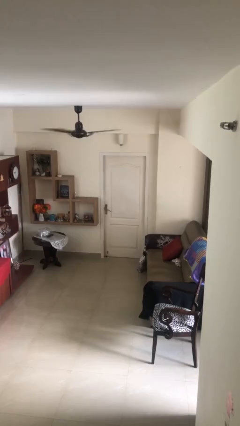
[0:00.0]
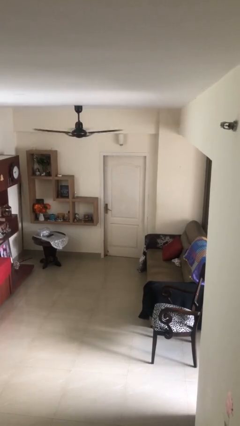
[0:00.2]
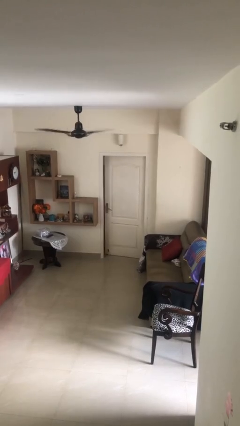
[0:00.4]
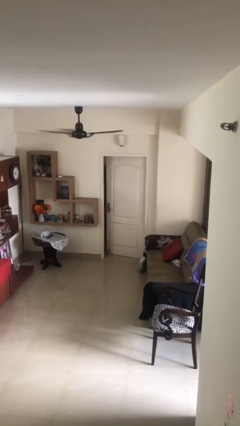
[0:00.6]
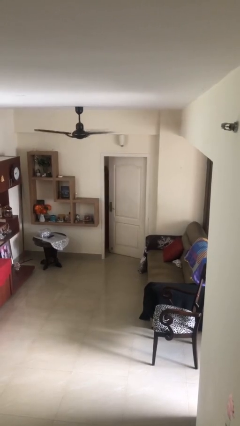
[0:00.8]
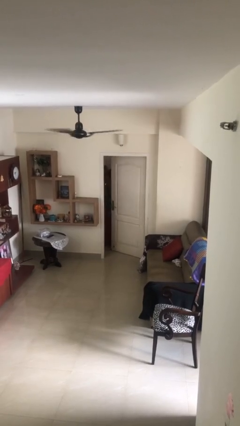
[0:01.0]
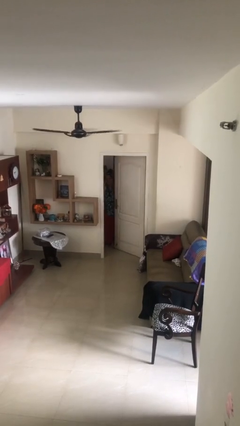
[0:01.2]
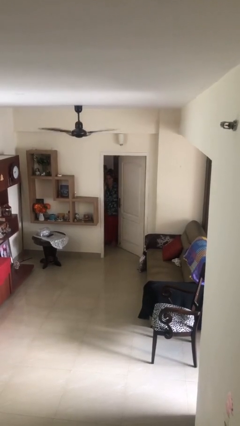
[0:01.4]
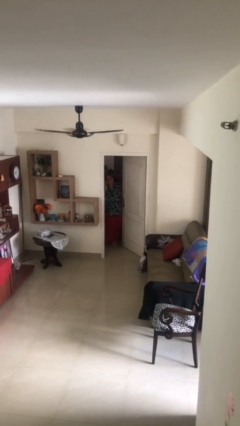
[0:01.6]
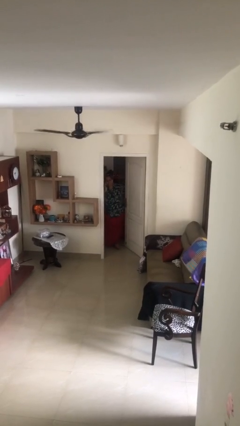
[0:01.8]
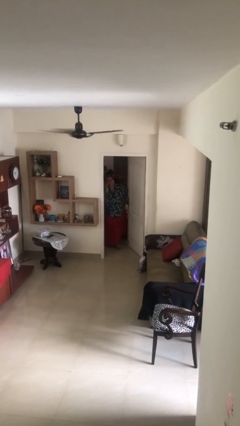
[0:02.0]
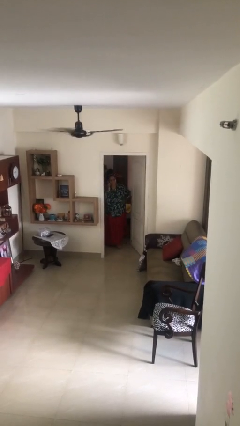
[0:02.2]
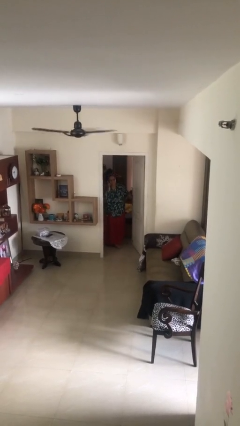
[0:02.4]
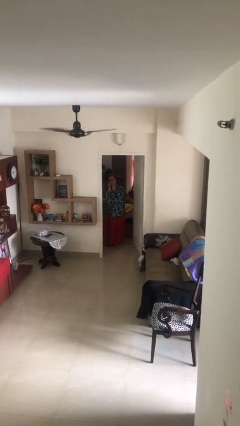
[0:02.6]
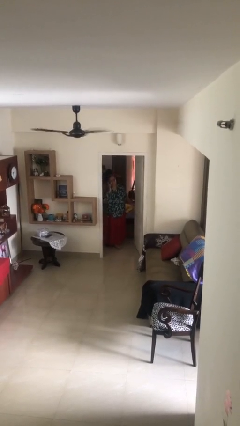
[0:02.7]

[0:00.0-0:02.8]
person opens facility door

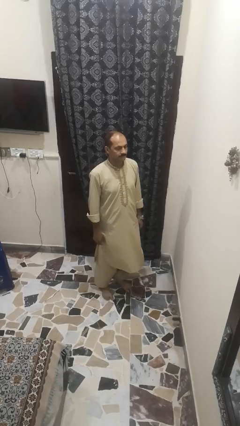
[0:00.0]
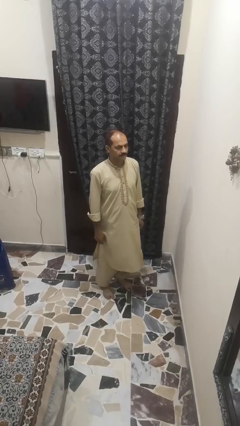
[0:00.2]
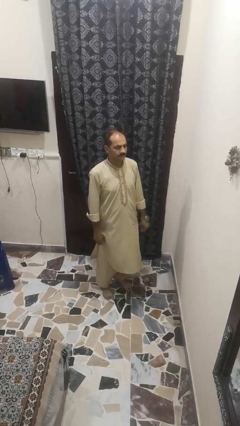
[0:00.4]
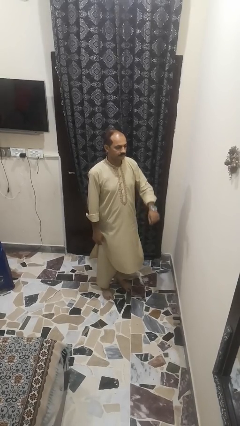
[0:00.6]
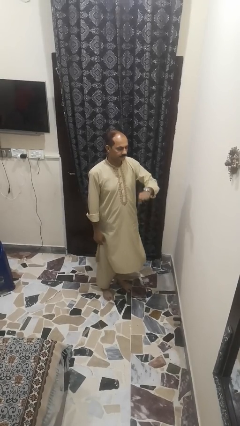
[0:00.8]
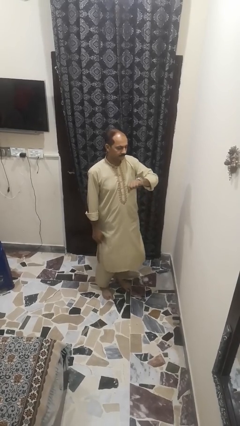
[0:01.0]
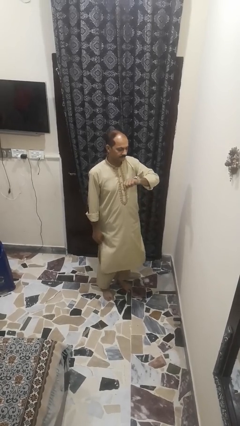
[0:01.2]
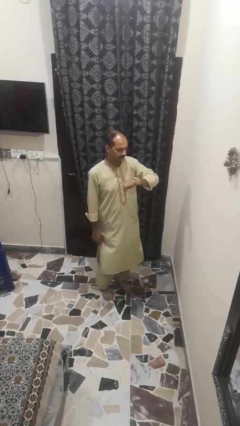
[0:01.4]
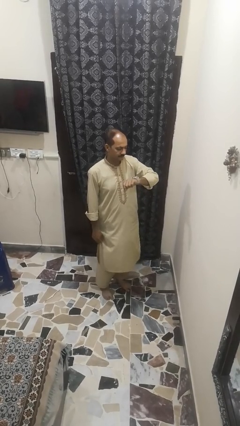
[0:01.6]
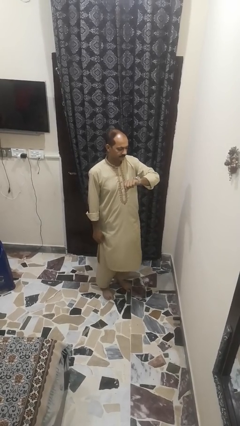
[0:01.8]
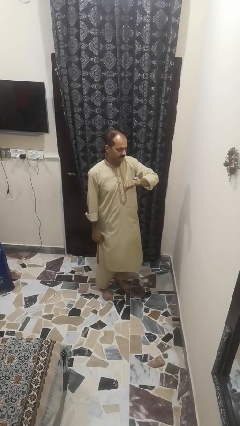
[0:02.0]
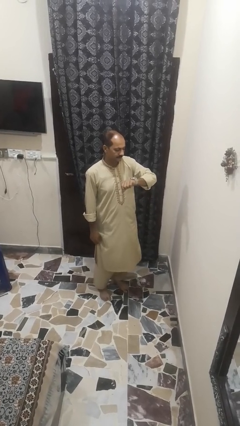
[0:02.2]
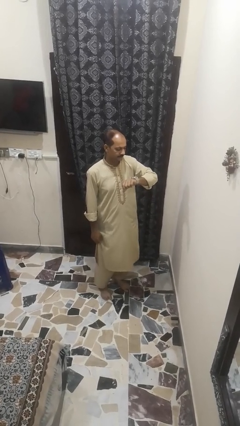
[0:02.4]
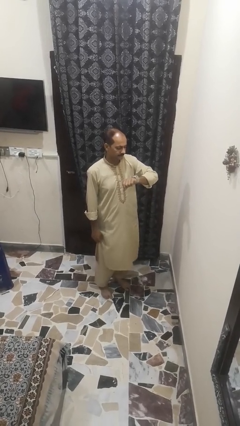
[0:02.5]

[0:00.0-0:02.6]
person looks at wristwatch

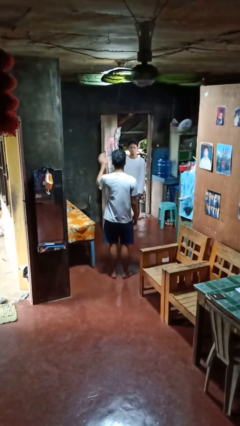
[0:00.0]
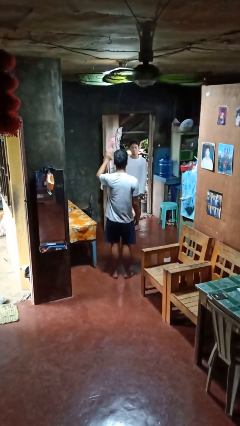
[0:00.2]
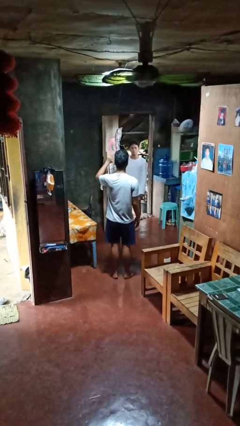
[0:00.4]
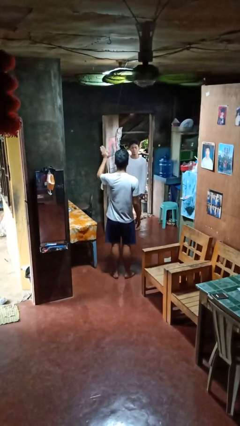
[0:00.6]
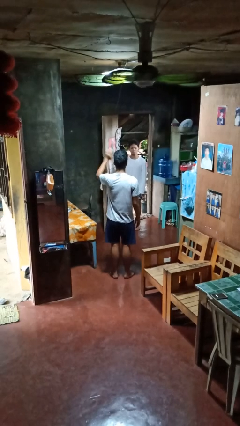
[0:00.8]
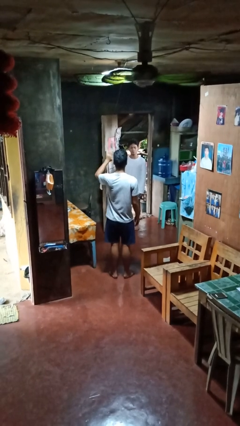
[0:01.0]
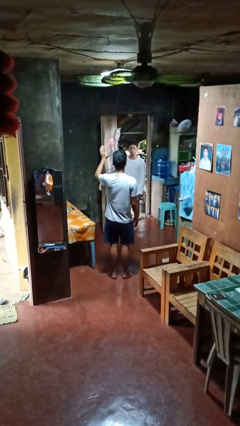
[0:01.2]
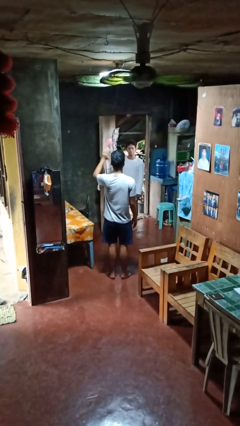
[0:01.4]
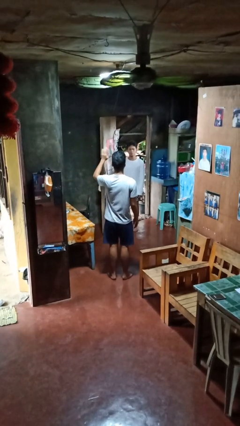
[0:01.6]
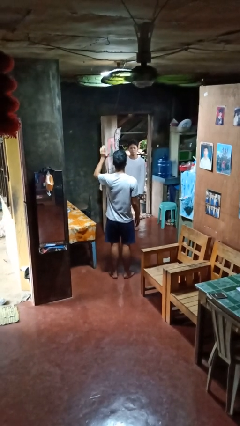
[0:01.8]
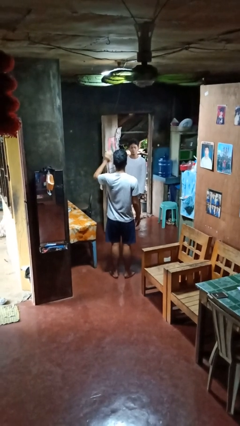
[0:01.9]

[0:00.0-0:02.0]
person waves at person

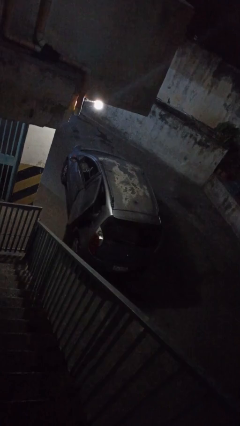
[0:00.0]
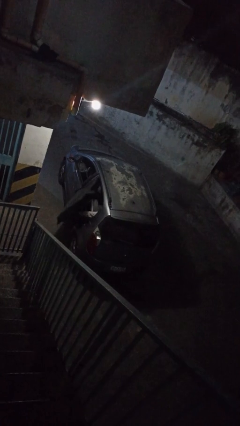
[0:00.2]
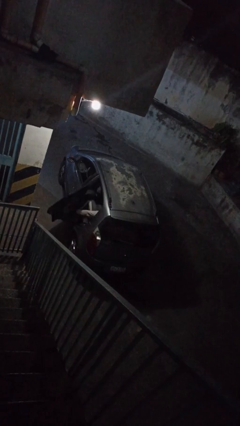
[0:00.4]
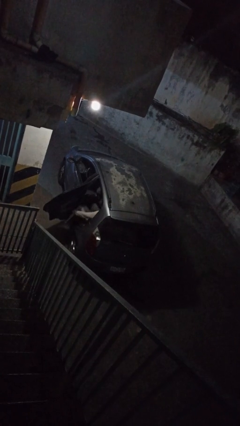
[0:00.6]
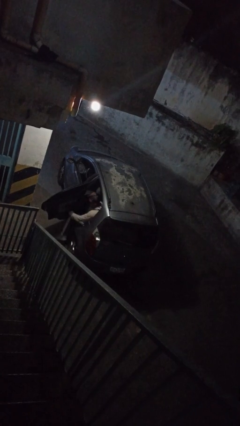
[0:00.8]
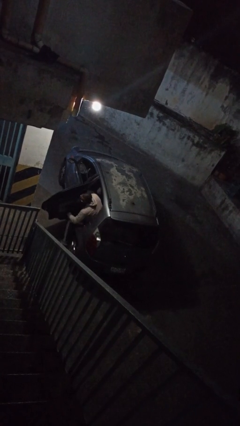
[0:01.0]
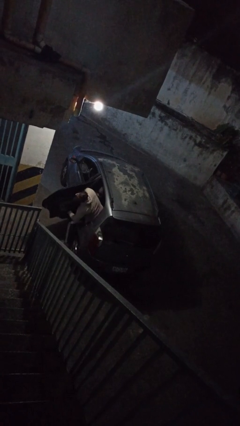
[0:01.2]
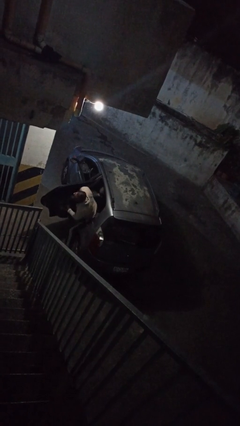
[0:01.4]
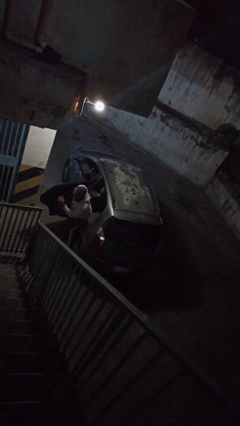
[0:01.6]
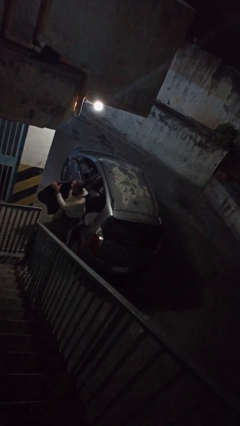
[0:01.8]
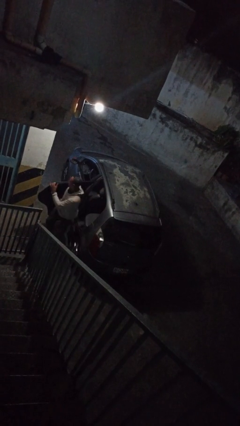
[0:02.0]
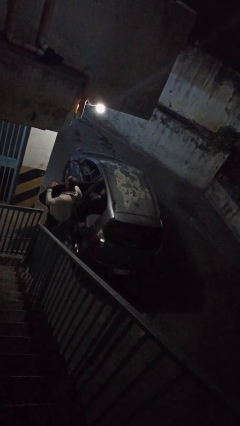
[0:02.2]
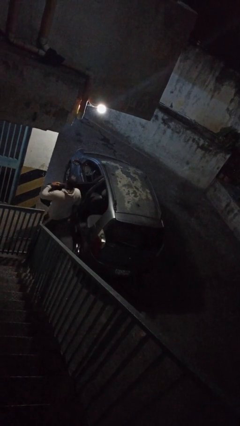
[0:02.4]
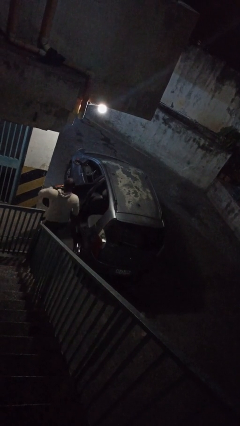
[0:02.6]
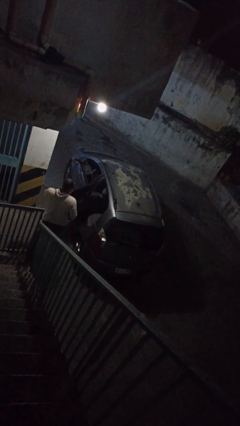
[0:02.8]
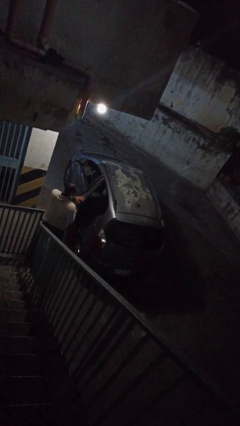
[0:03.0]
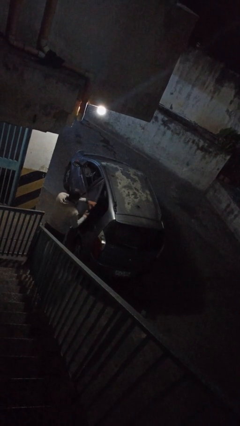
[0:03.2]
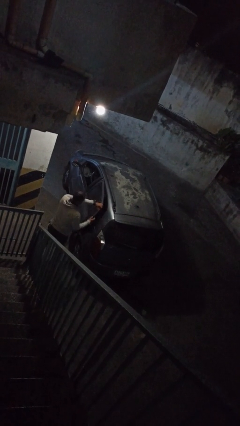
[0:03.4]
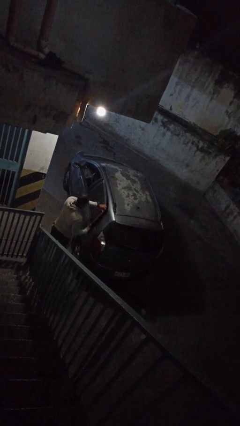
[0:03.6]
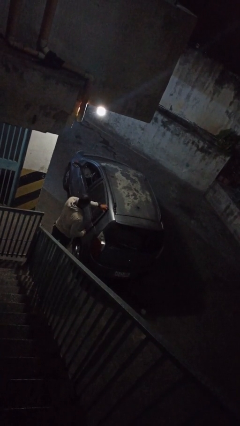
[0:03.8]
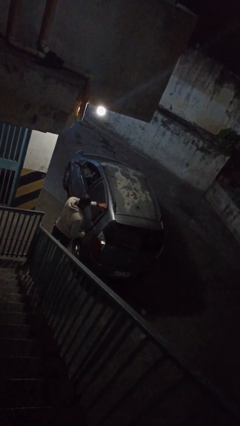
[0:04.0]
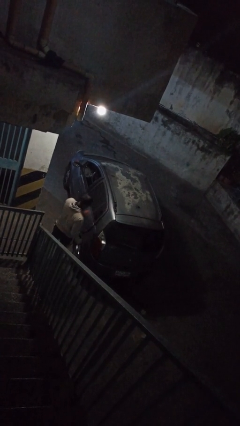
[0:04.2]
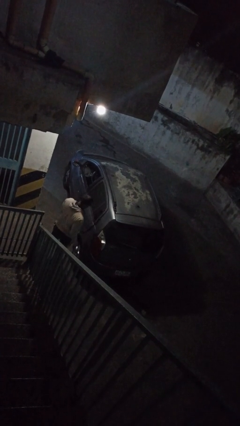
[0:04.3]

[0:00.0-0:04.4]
car drops off person

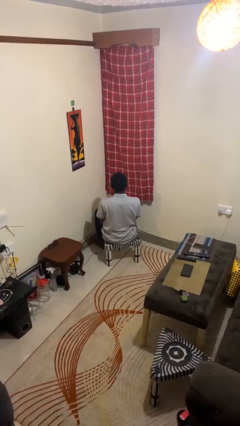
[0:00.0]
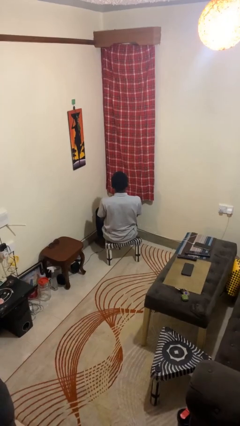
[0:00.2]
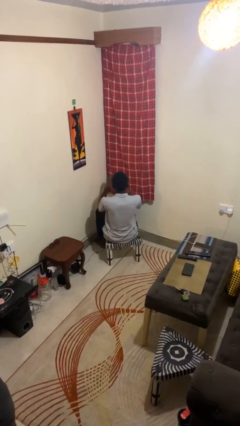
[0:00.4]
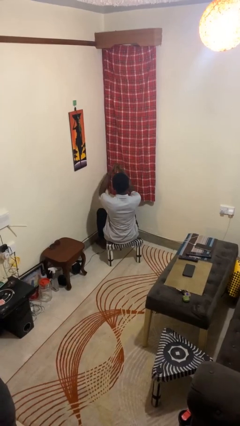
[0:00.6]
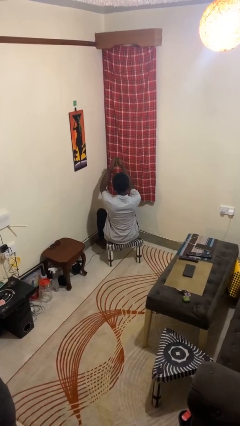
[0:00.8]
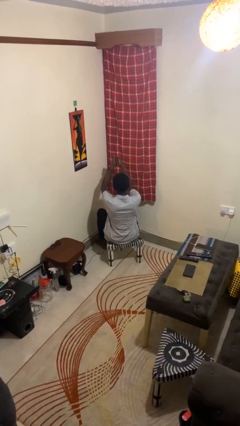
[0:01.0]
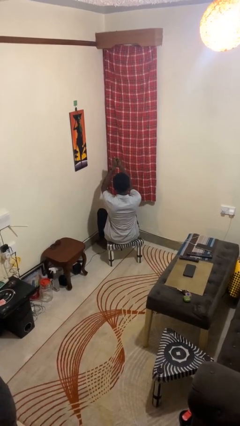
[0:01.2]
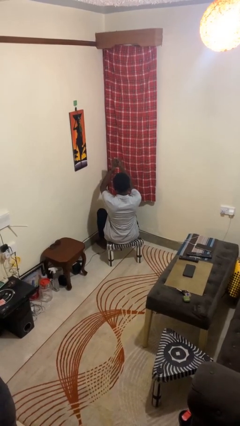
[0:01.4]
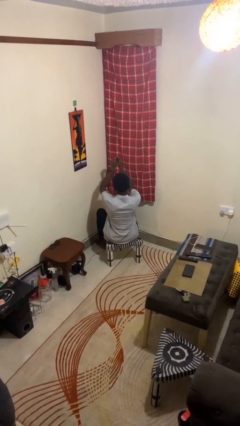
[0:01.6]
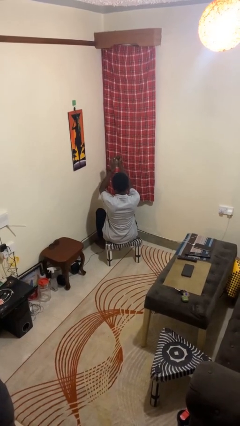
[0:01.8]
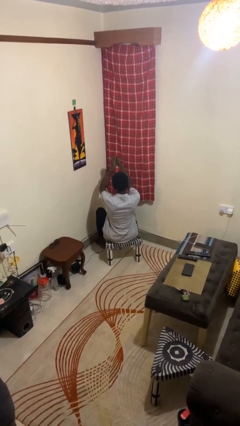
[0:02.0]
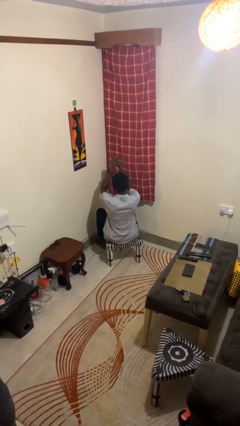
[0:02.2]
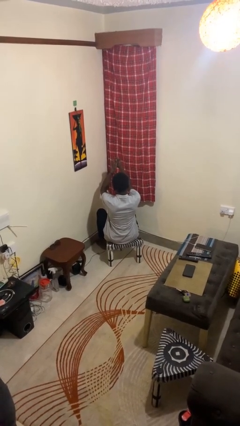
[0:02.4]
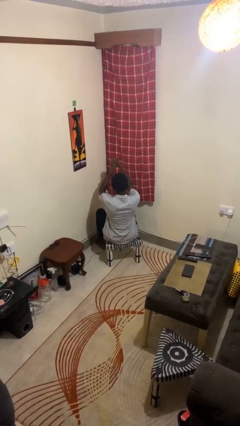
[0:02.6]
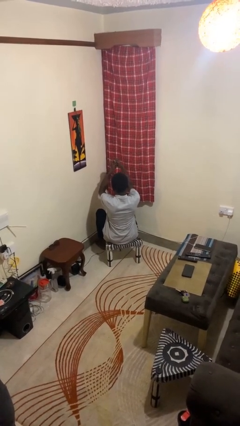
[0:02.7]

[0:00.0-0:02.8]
person cracks knuckles

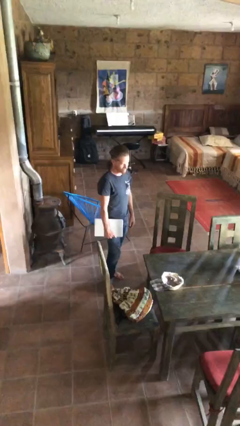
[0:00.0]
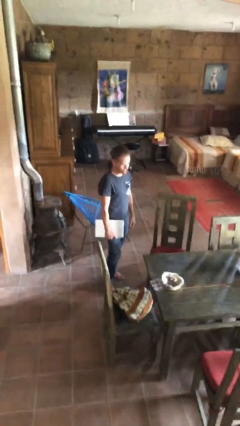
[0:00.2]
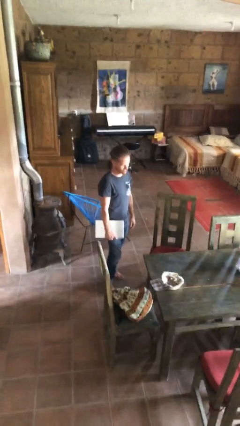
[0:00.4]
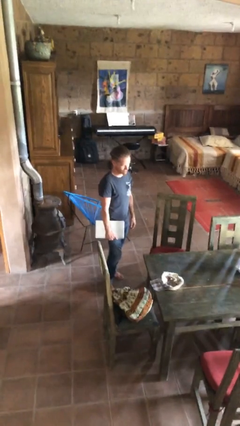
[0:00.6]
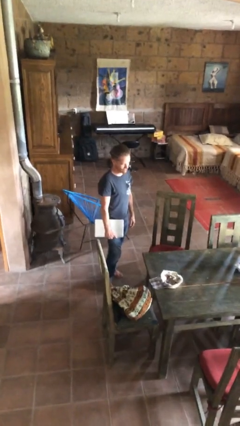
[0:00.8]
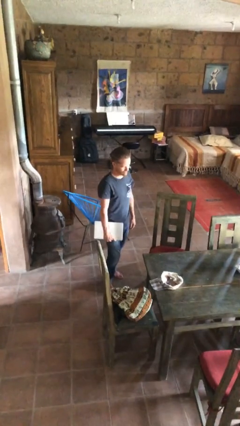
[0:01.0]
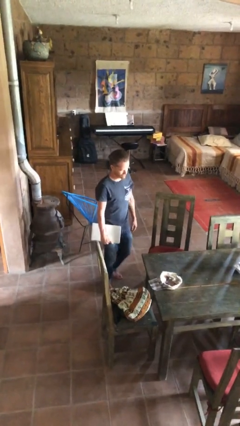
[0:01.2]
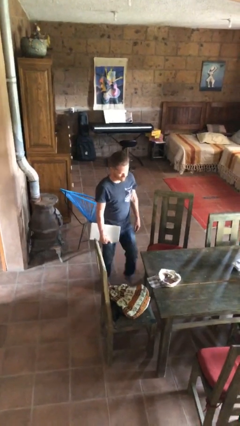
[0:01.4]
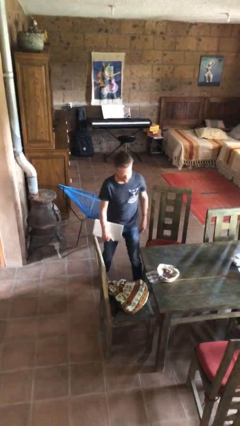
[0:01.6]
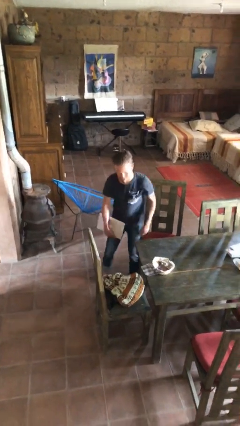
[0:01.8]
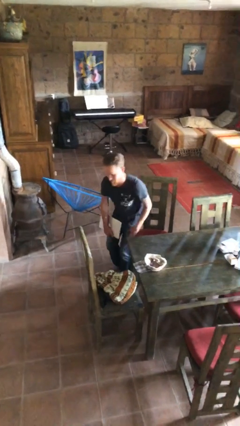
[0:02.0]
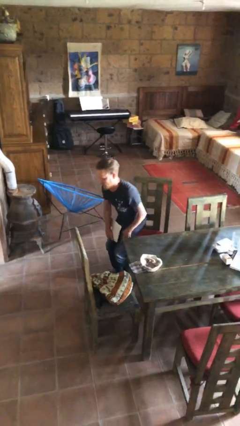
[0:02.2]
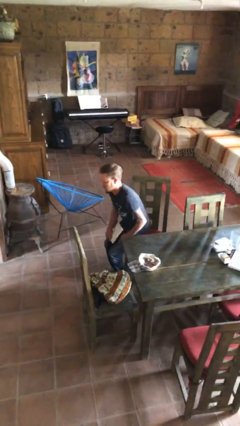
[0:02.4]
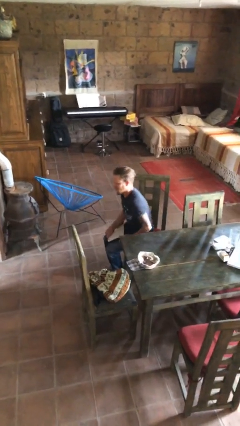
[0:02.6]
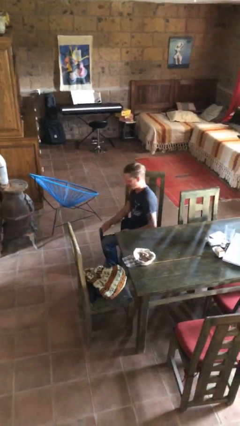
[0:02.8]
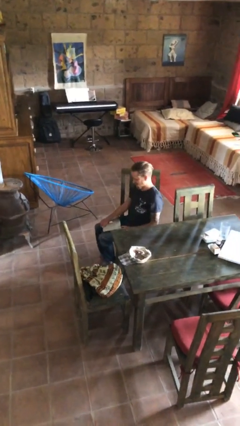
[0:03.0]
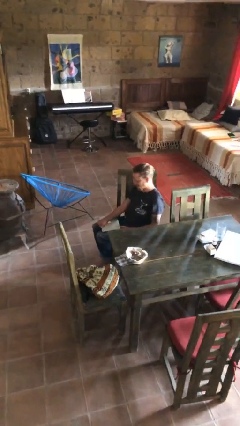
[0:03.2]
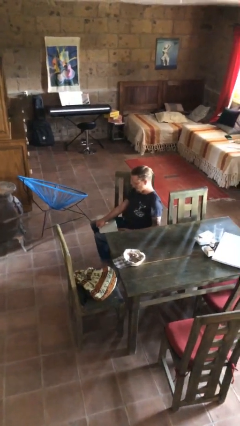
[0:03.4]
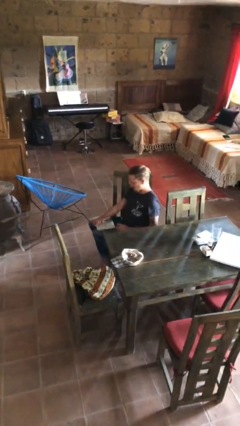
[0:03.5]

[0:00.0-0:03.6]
person sits down
